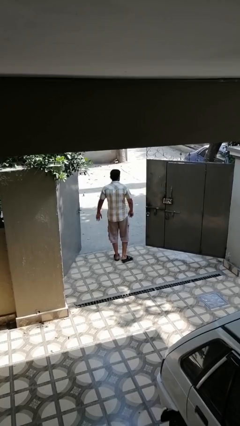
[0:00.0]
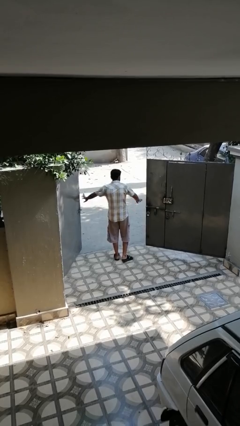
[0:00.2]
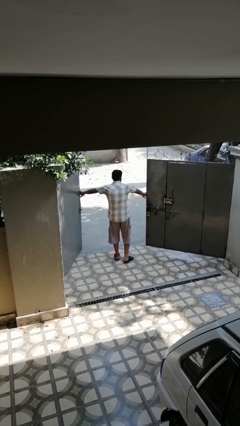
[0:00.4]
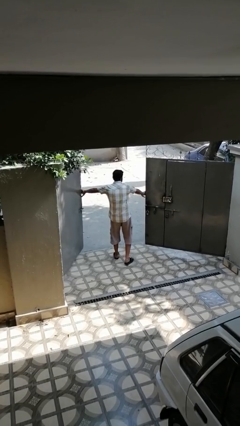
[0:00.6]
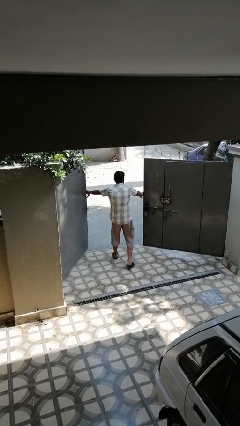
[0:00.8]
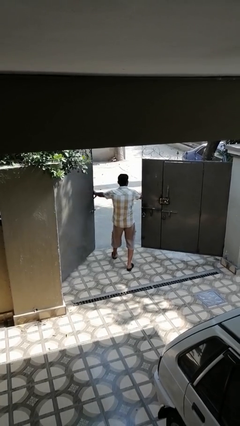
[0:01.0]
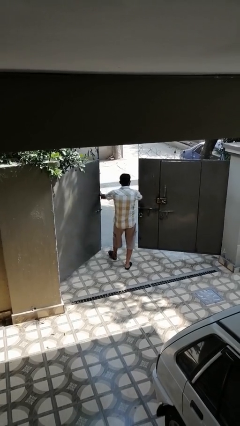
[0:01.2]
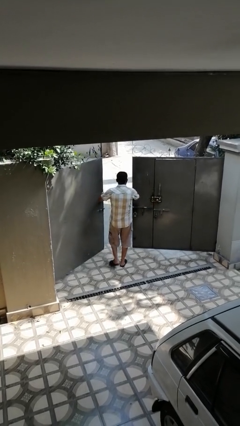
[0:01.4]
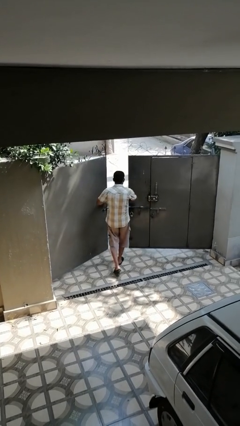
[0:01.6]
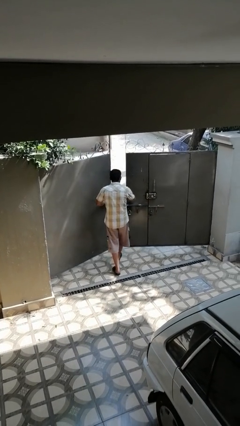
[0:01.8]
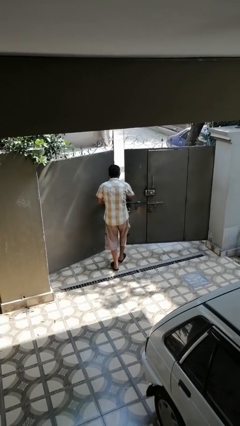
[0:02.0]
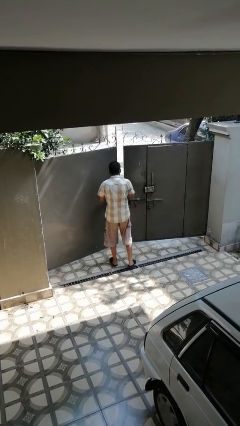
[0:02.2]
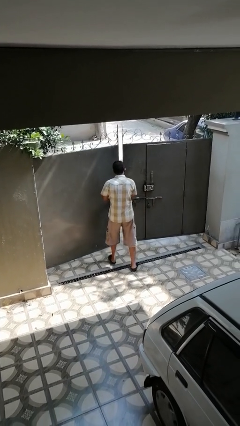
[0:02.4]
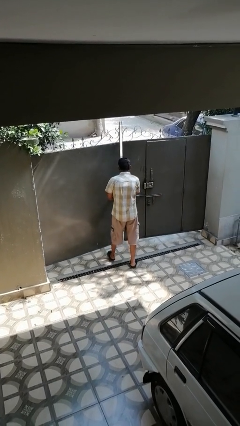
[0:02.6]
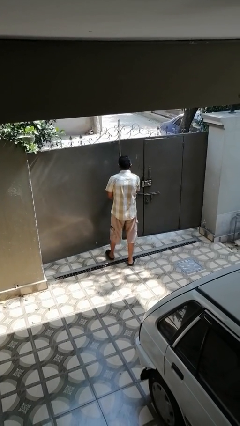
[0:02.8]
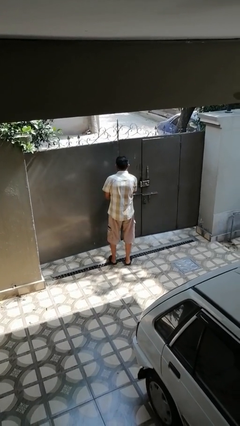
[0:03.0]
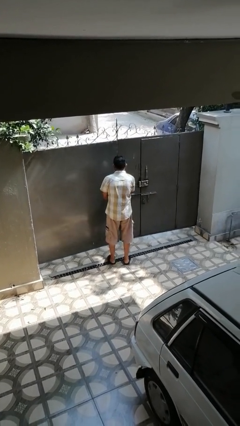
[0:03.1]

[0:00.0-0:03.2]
person closes gate

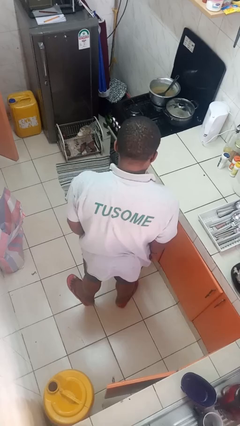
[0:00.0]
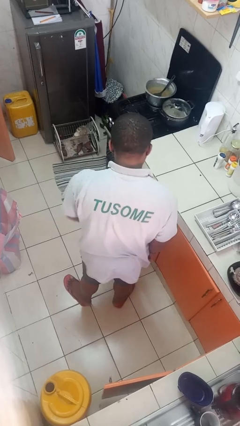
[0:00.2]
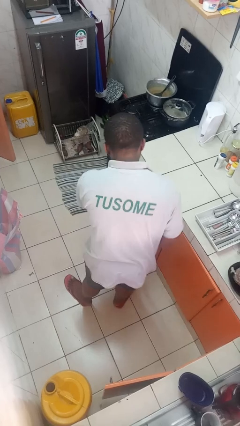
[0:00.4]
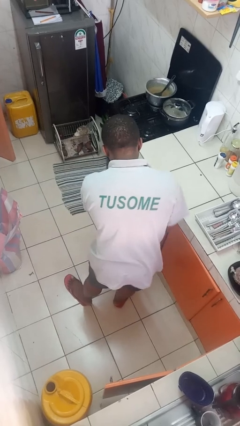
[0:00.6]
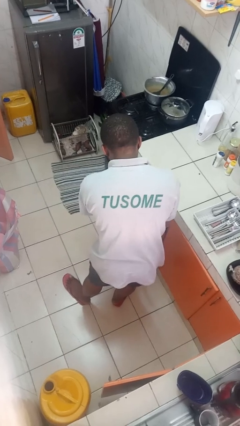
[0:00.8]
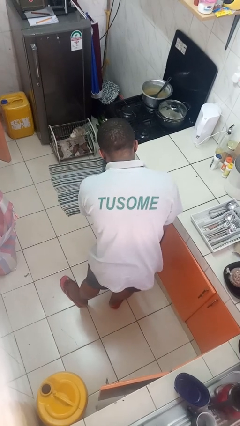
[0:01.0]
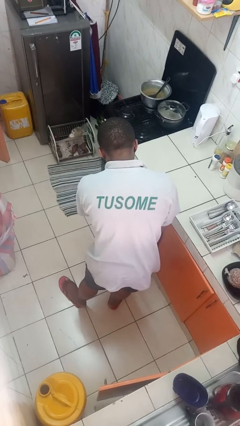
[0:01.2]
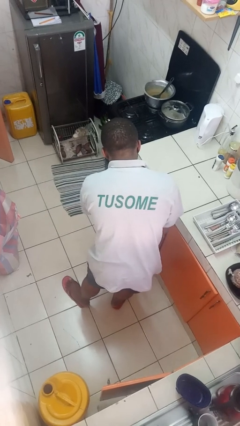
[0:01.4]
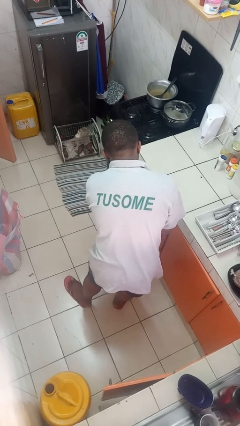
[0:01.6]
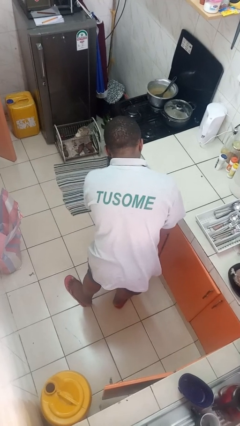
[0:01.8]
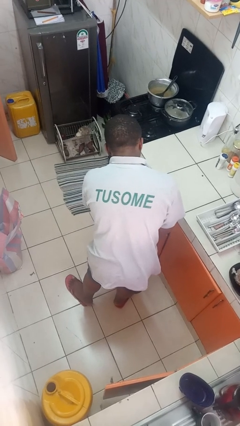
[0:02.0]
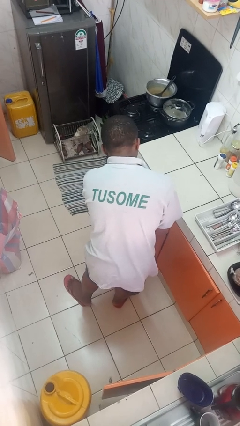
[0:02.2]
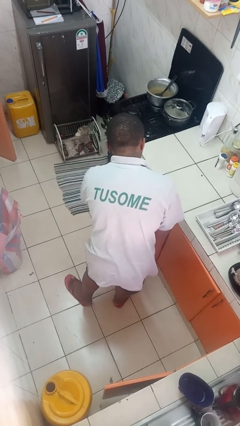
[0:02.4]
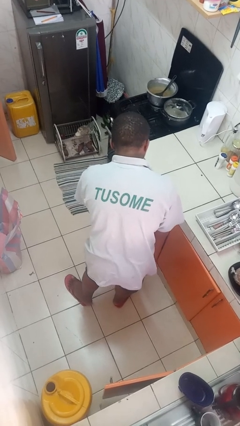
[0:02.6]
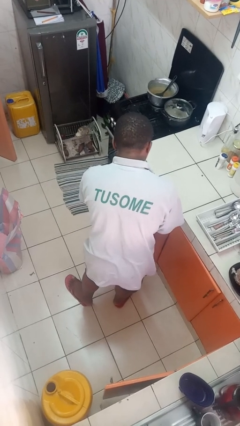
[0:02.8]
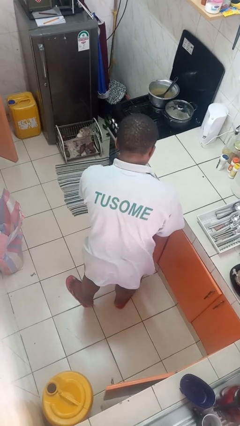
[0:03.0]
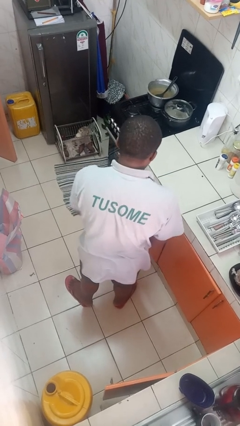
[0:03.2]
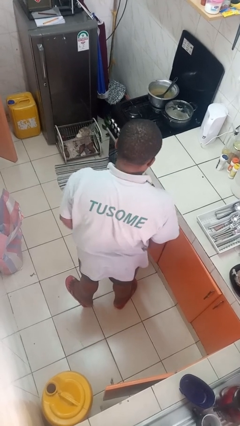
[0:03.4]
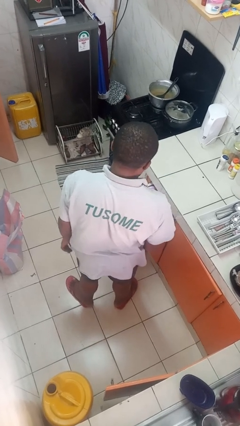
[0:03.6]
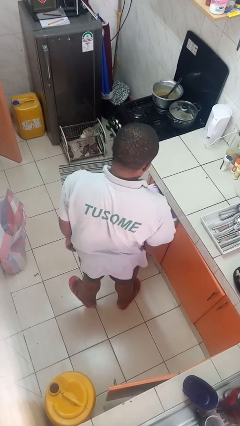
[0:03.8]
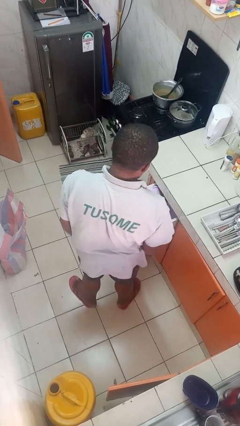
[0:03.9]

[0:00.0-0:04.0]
person searches in kitchen drawer

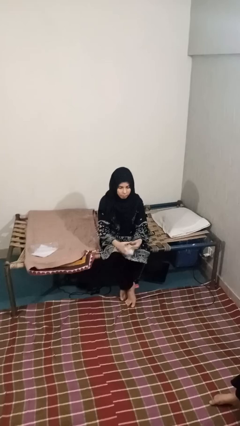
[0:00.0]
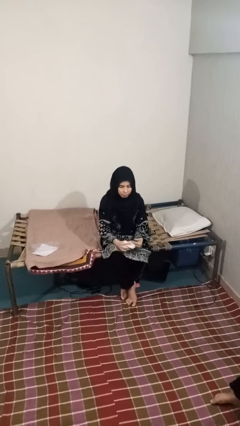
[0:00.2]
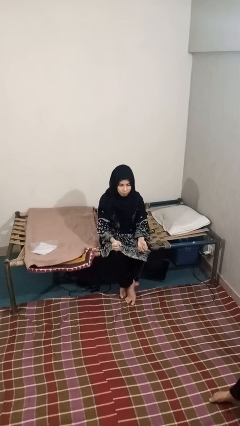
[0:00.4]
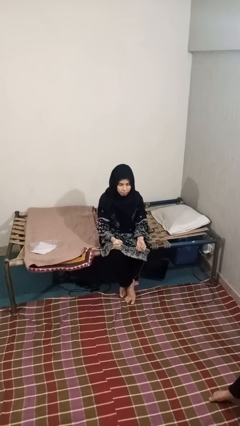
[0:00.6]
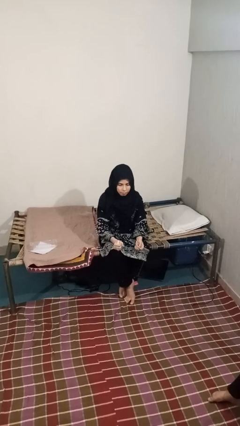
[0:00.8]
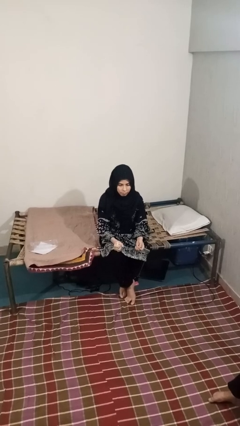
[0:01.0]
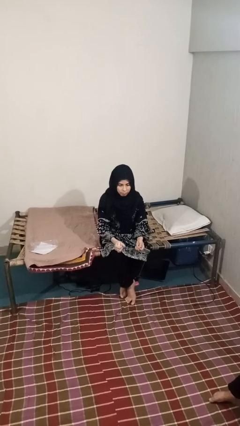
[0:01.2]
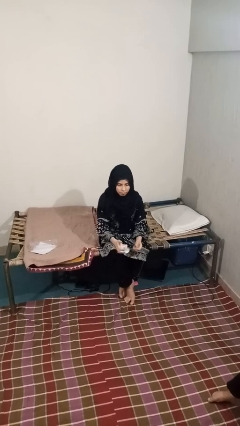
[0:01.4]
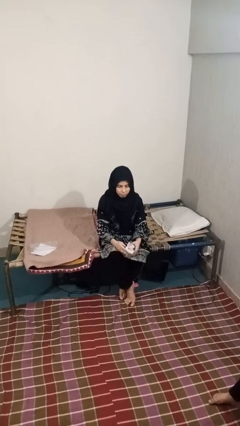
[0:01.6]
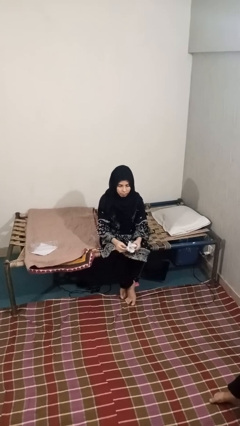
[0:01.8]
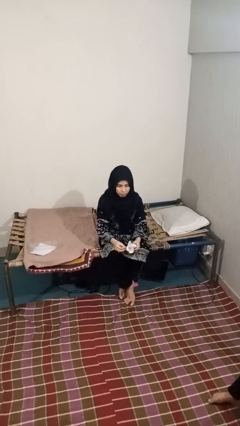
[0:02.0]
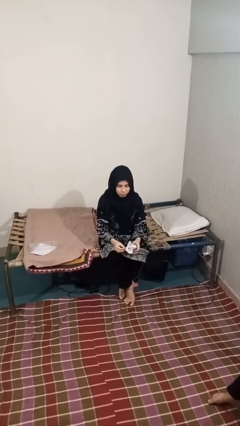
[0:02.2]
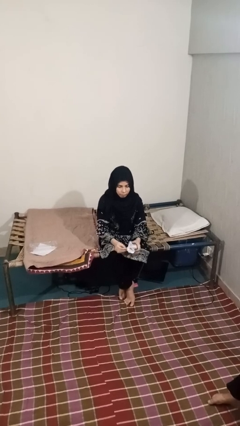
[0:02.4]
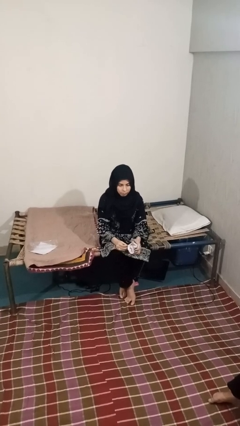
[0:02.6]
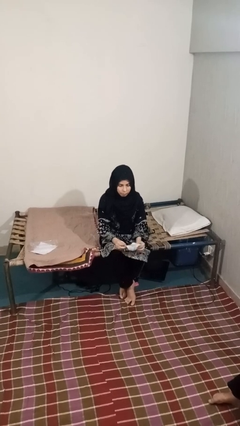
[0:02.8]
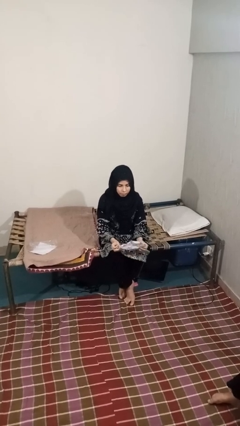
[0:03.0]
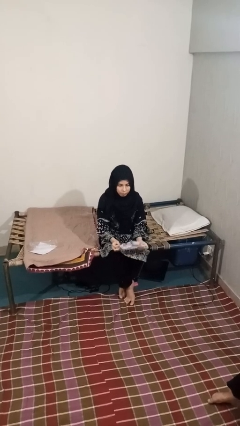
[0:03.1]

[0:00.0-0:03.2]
person crumples paper

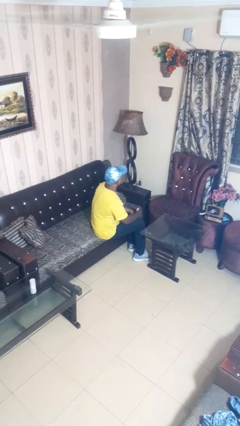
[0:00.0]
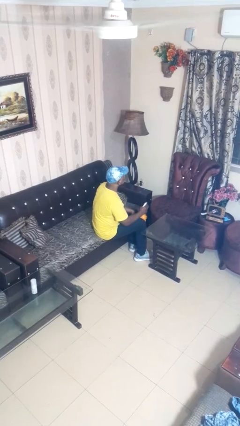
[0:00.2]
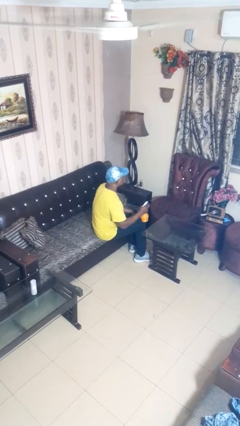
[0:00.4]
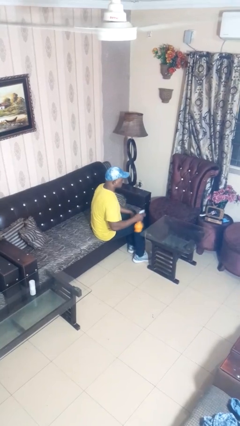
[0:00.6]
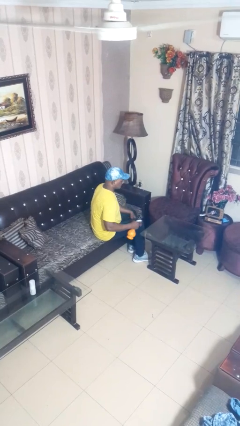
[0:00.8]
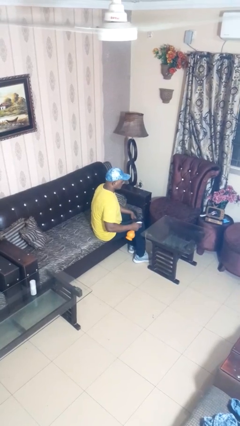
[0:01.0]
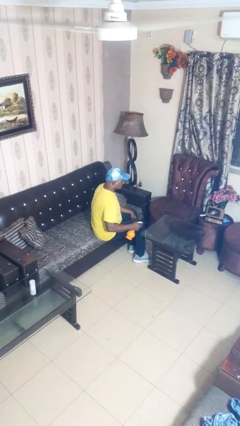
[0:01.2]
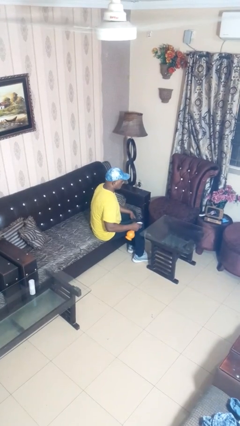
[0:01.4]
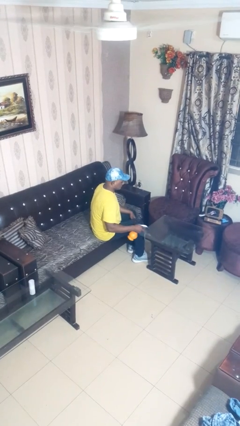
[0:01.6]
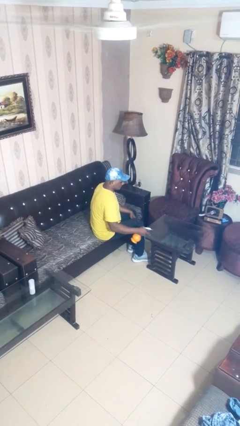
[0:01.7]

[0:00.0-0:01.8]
person sprays from bottle

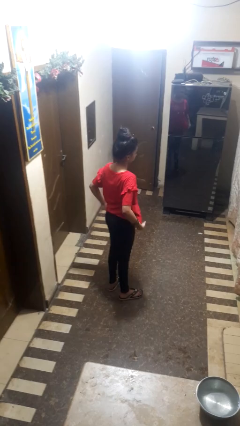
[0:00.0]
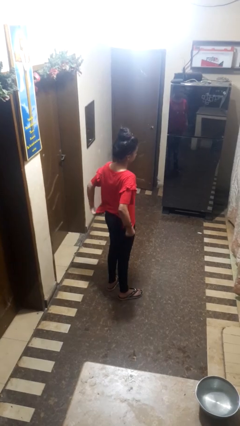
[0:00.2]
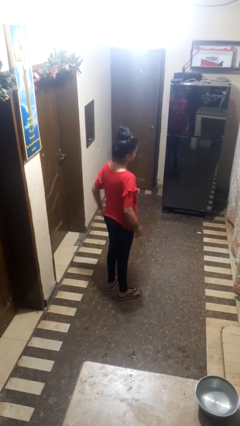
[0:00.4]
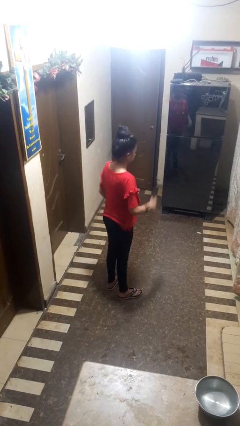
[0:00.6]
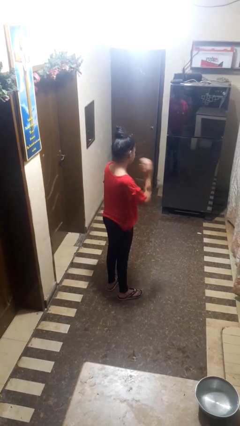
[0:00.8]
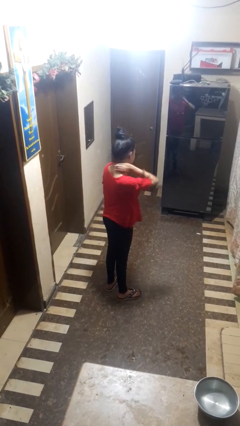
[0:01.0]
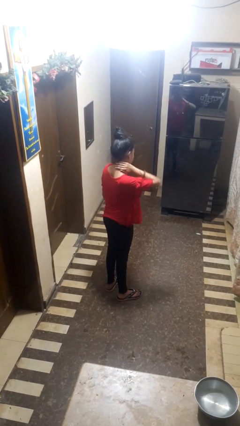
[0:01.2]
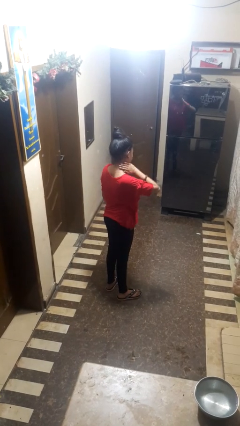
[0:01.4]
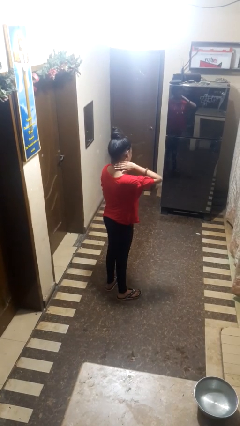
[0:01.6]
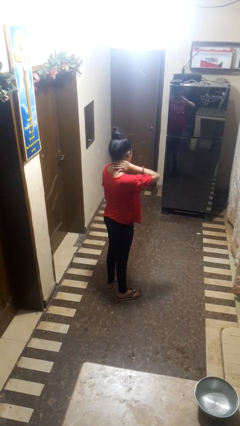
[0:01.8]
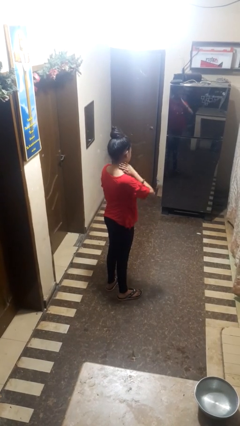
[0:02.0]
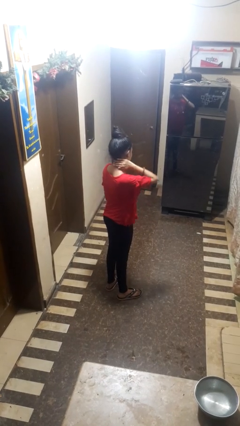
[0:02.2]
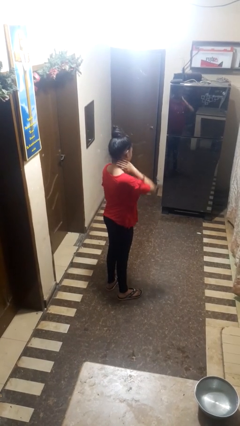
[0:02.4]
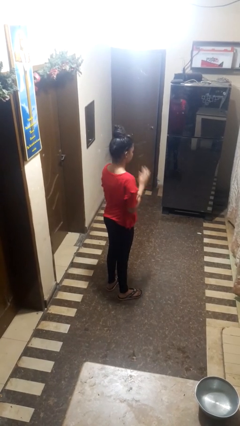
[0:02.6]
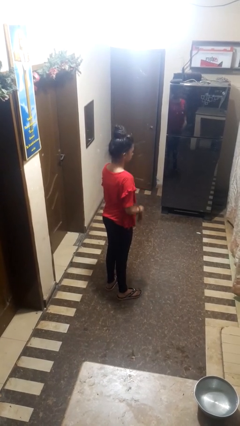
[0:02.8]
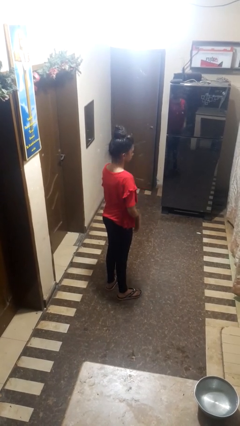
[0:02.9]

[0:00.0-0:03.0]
person rubs neck

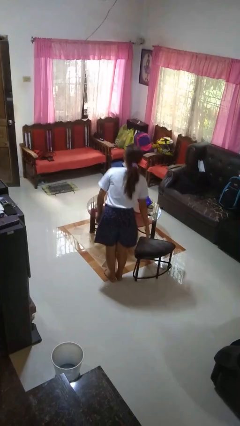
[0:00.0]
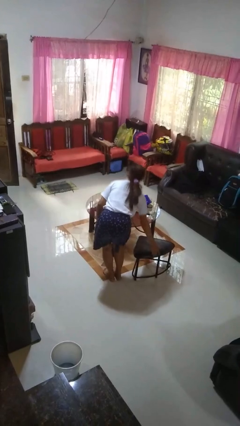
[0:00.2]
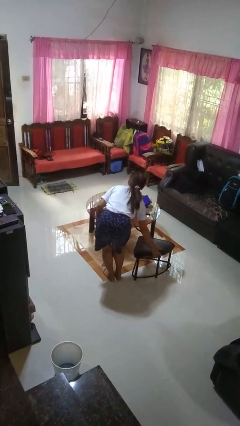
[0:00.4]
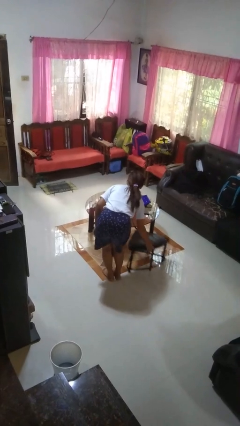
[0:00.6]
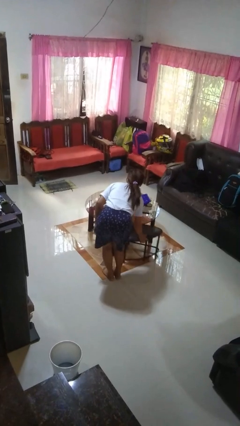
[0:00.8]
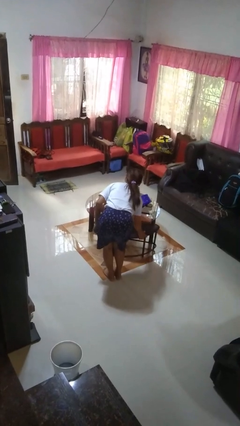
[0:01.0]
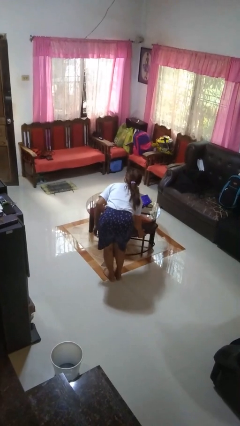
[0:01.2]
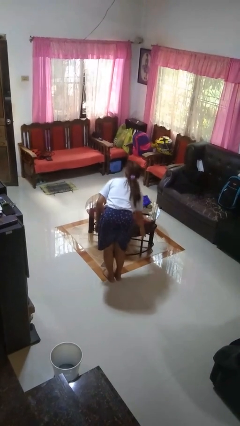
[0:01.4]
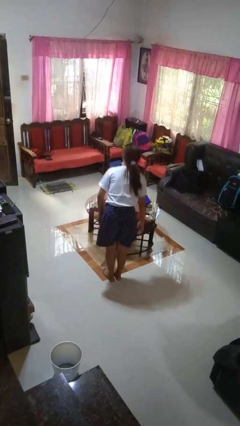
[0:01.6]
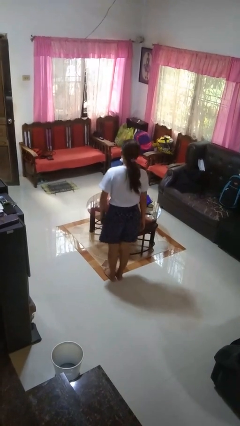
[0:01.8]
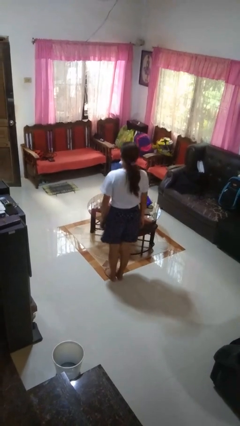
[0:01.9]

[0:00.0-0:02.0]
person pushes in chair

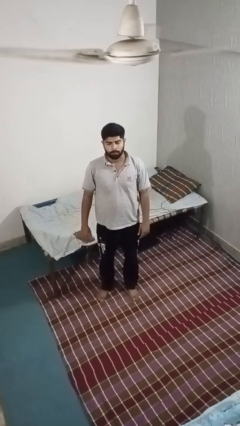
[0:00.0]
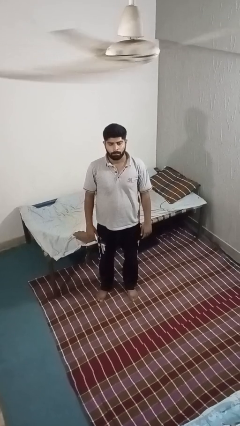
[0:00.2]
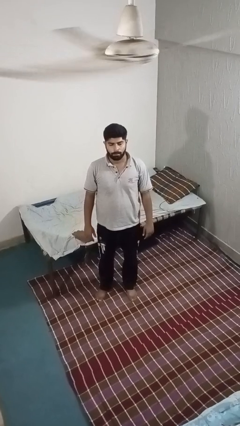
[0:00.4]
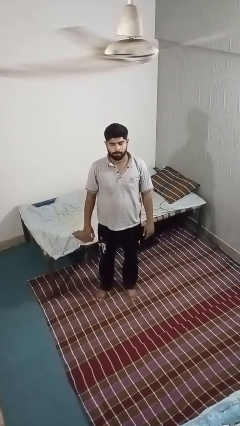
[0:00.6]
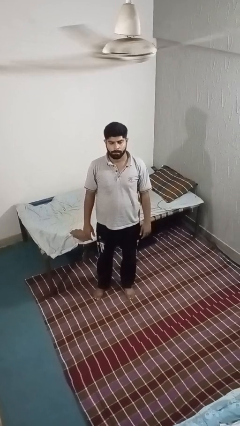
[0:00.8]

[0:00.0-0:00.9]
person stands up from floor
